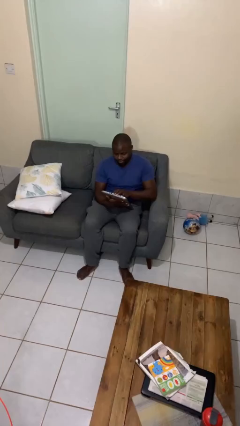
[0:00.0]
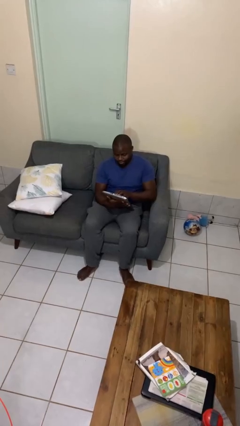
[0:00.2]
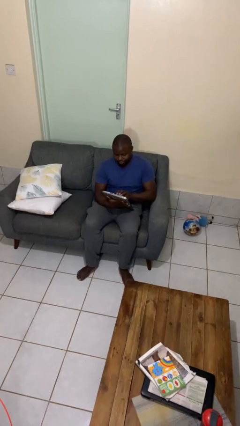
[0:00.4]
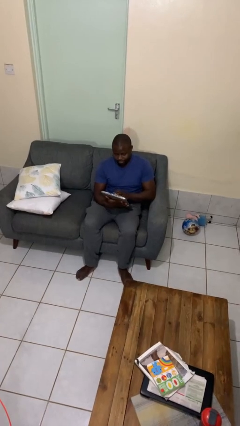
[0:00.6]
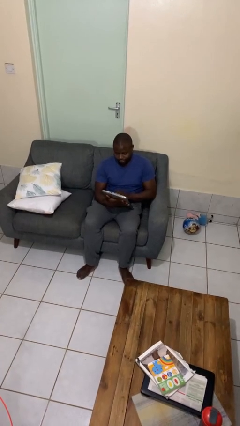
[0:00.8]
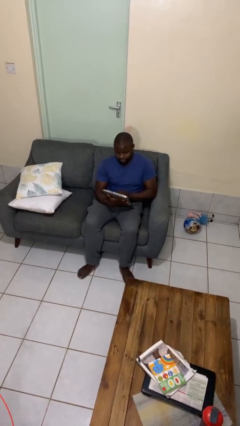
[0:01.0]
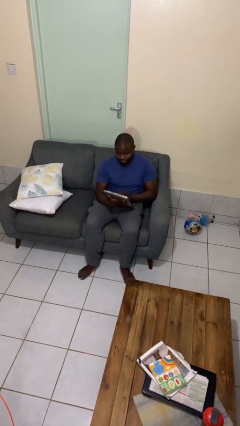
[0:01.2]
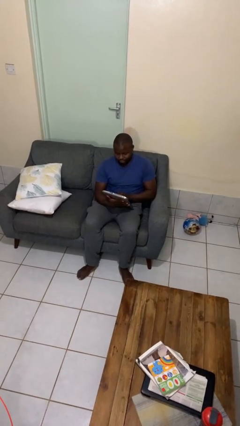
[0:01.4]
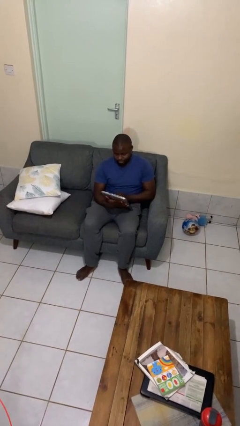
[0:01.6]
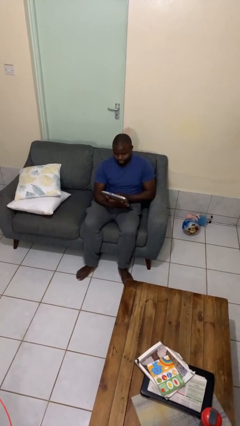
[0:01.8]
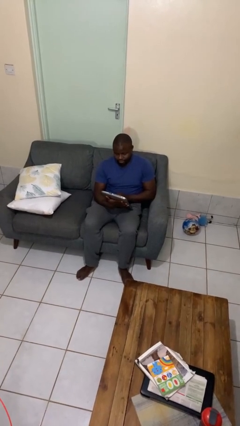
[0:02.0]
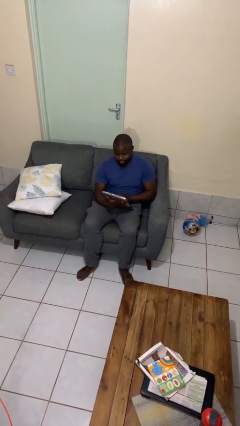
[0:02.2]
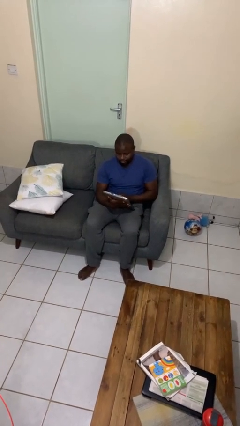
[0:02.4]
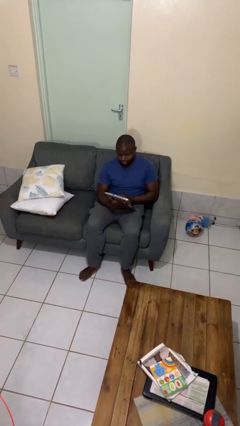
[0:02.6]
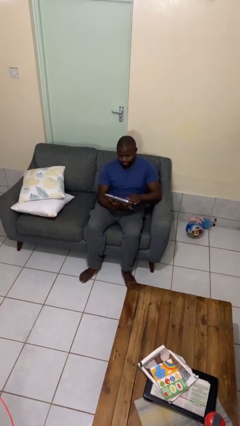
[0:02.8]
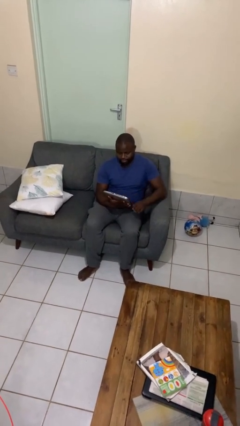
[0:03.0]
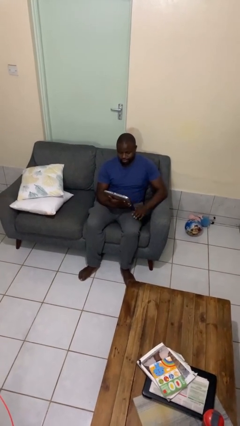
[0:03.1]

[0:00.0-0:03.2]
person interacts with tablet

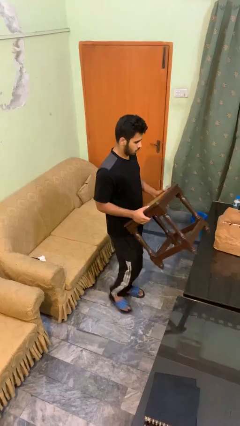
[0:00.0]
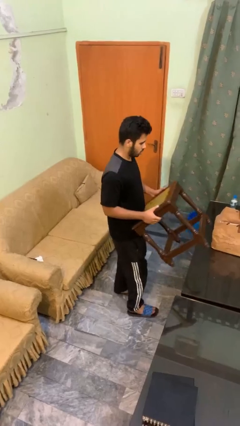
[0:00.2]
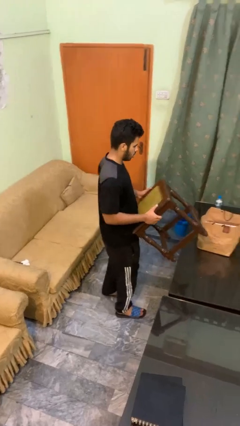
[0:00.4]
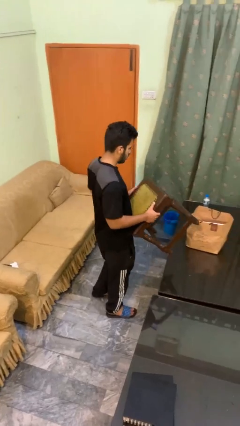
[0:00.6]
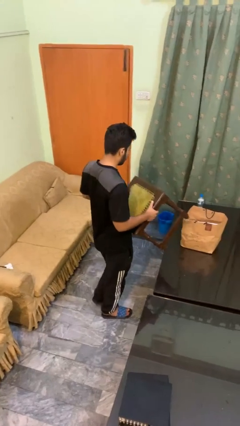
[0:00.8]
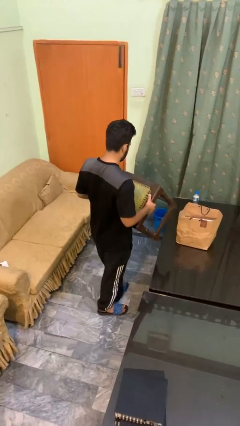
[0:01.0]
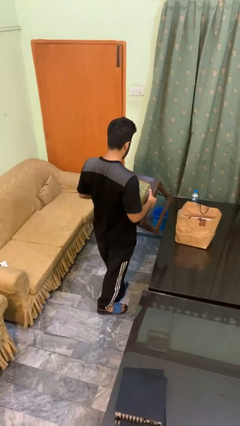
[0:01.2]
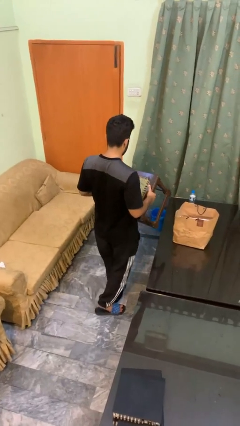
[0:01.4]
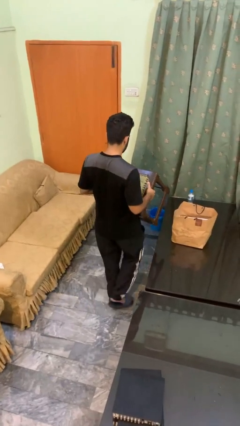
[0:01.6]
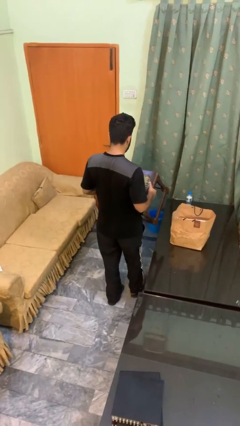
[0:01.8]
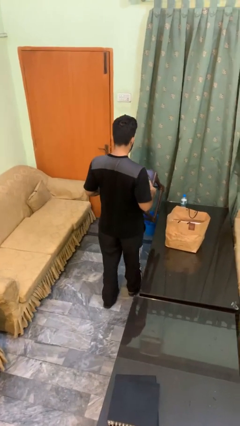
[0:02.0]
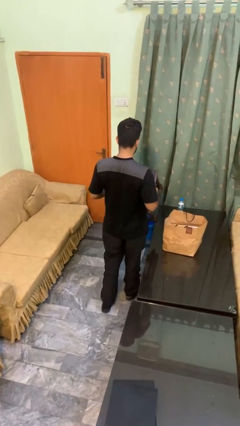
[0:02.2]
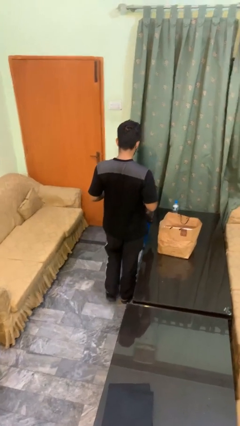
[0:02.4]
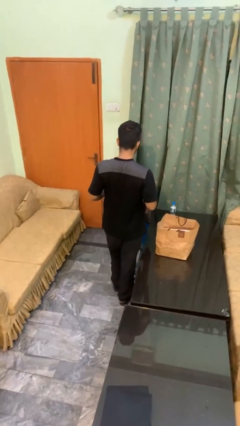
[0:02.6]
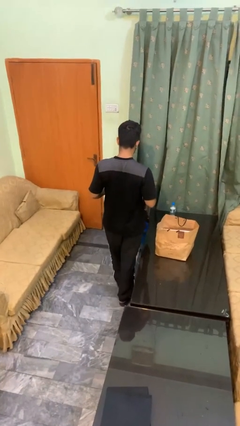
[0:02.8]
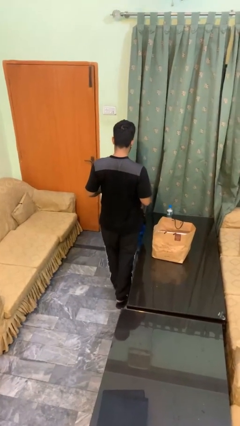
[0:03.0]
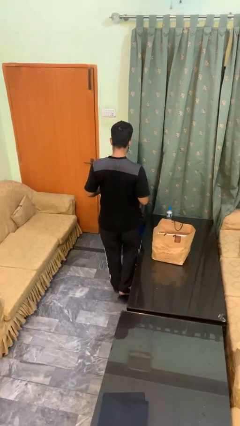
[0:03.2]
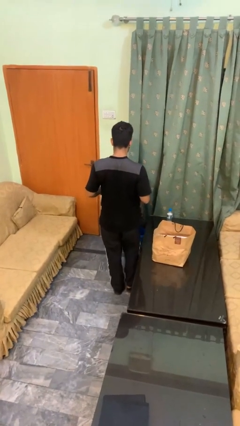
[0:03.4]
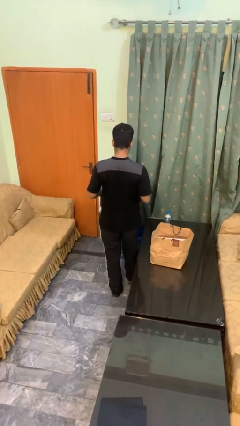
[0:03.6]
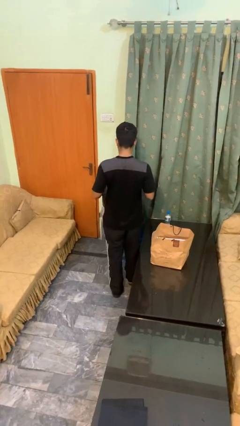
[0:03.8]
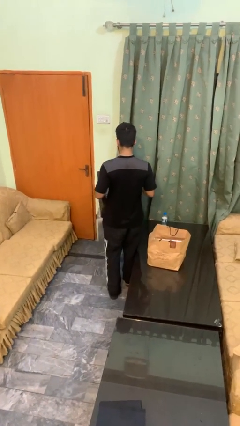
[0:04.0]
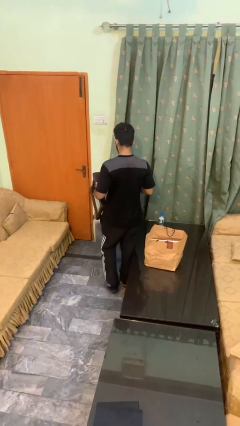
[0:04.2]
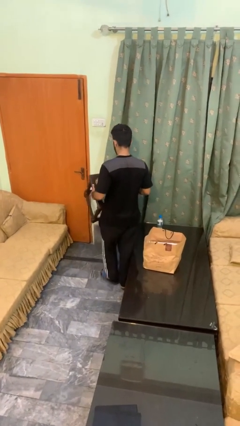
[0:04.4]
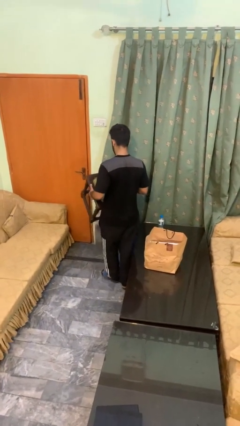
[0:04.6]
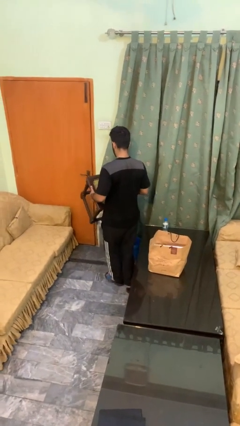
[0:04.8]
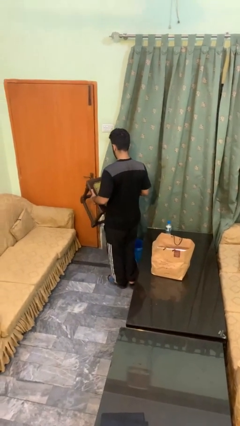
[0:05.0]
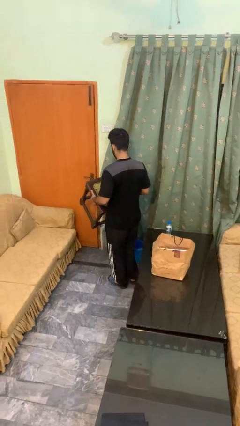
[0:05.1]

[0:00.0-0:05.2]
person carries furniture

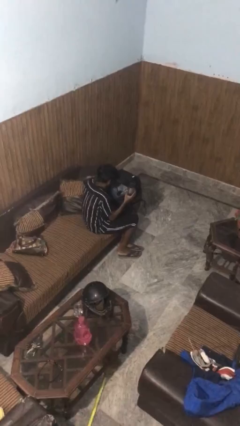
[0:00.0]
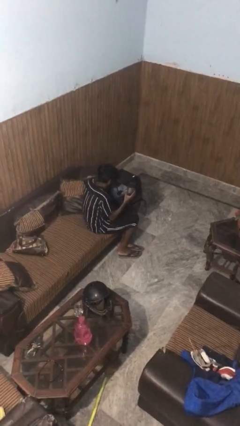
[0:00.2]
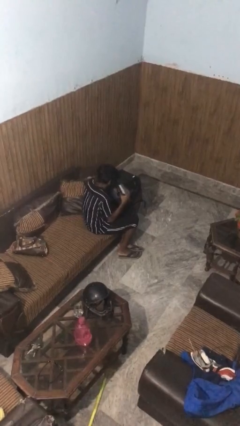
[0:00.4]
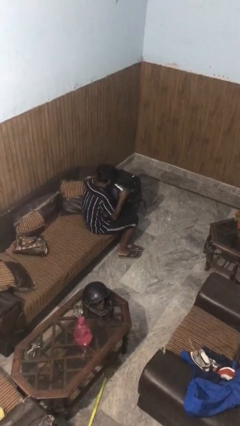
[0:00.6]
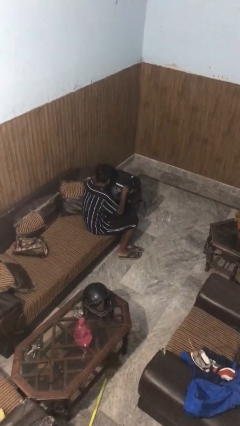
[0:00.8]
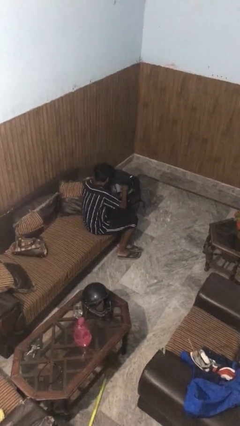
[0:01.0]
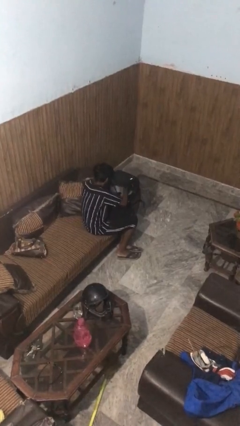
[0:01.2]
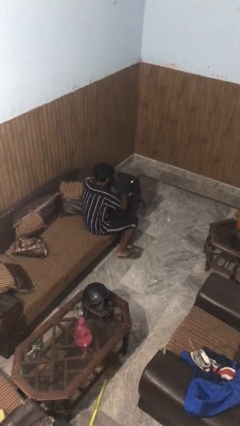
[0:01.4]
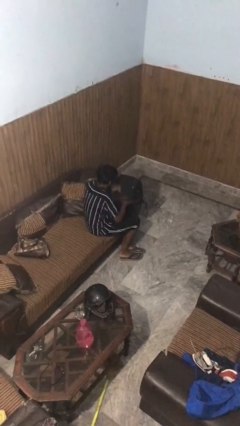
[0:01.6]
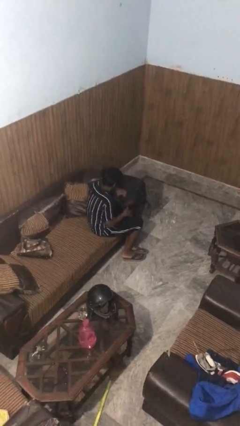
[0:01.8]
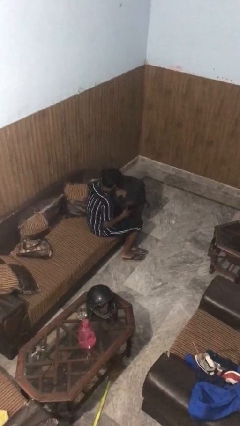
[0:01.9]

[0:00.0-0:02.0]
person puts object into backpack

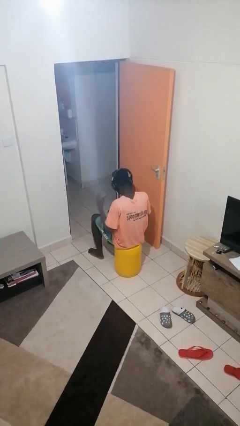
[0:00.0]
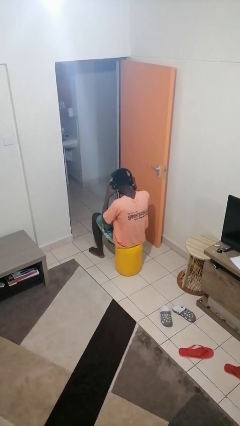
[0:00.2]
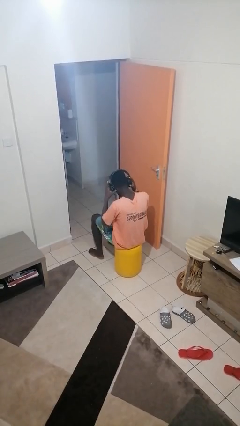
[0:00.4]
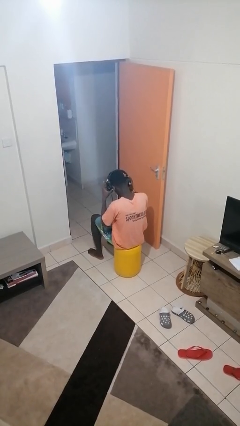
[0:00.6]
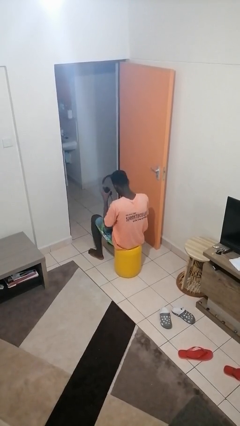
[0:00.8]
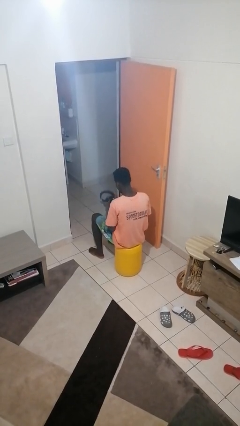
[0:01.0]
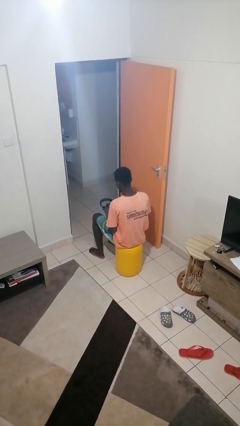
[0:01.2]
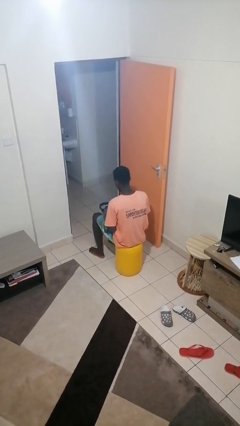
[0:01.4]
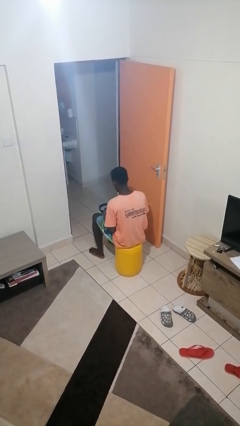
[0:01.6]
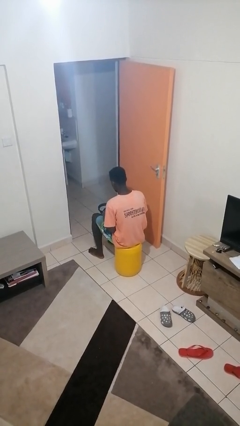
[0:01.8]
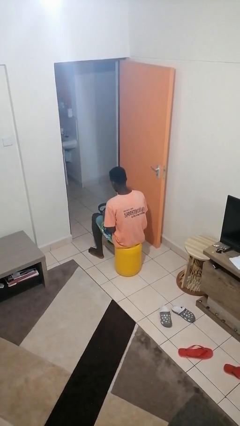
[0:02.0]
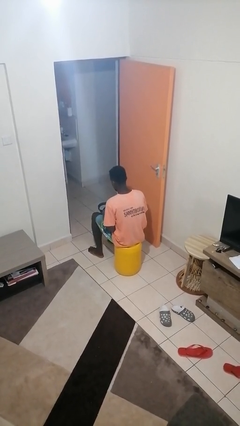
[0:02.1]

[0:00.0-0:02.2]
person takes off headphones

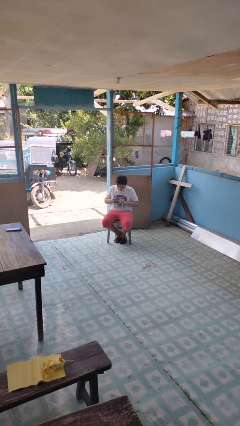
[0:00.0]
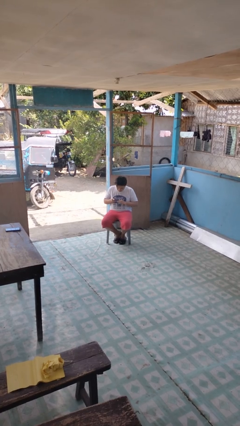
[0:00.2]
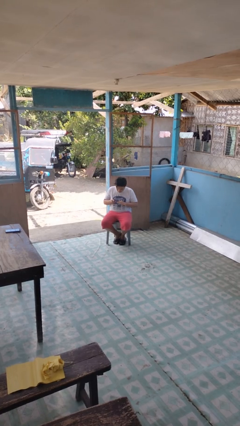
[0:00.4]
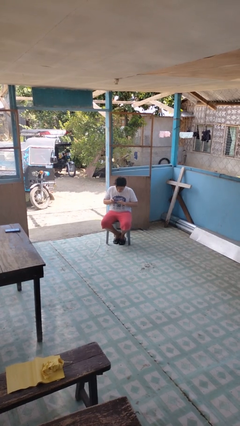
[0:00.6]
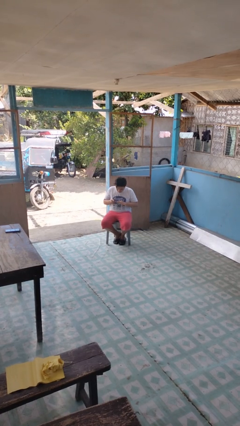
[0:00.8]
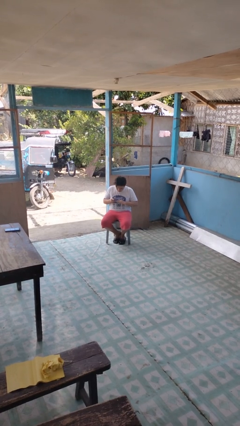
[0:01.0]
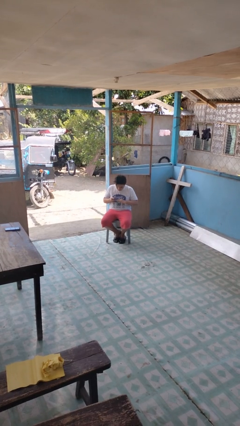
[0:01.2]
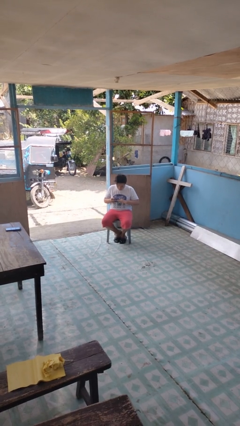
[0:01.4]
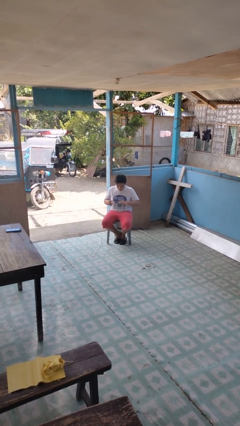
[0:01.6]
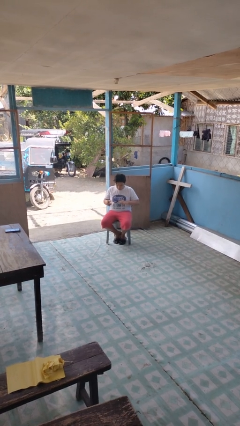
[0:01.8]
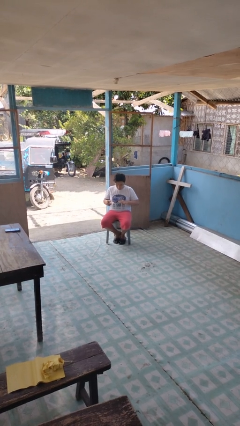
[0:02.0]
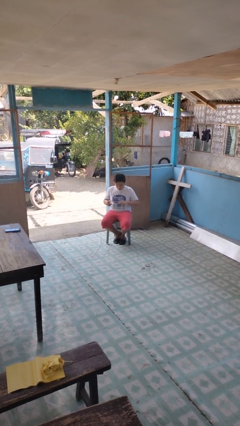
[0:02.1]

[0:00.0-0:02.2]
person clips fingernails

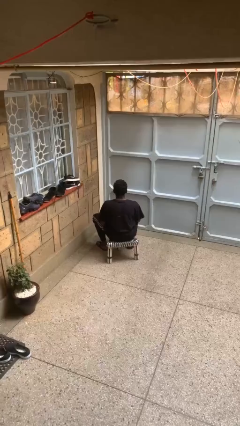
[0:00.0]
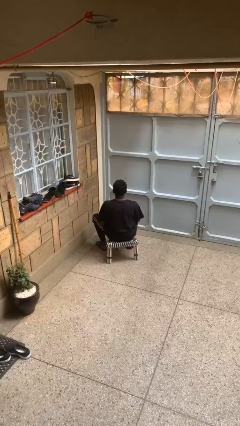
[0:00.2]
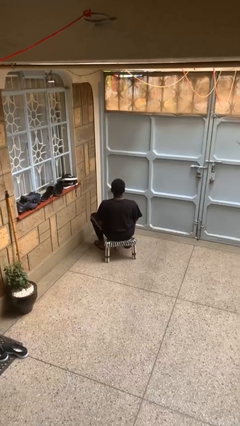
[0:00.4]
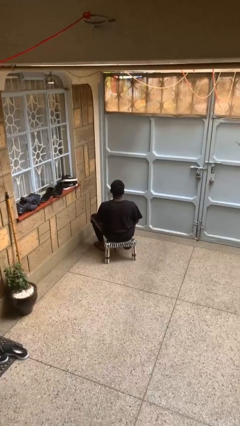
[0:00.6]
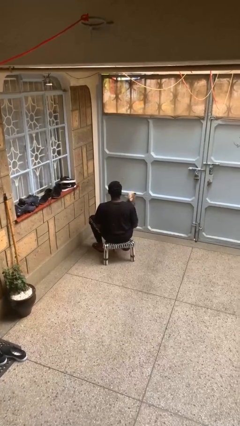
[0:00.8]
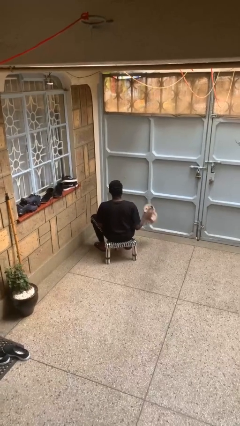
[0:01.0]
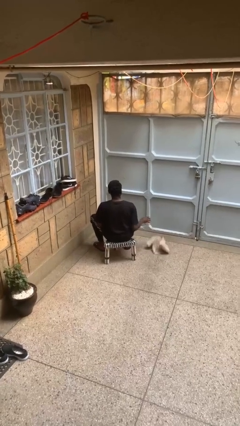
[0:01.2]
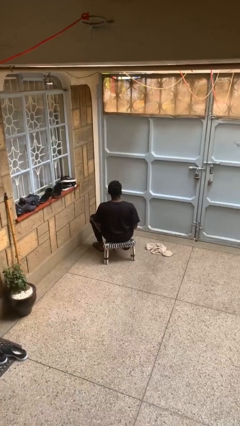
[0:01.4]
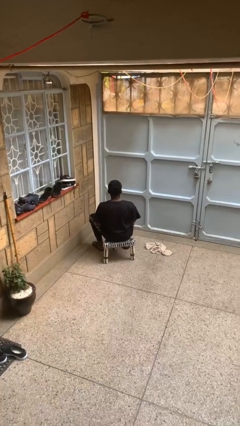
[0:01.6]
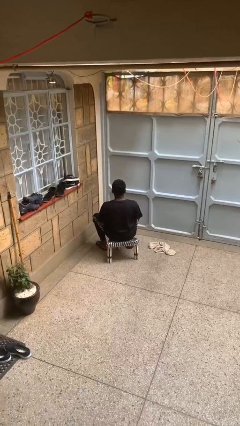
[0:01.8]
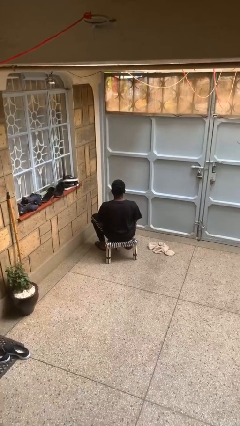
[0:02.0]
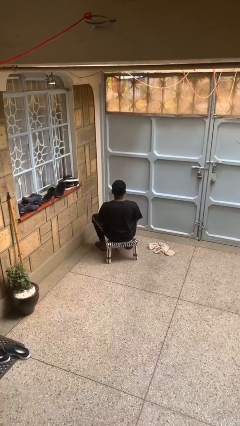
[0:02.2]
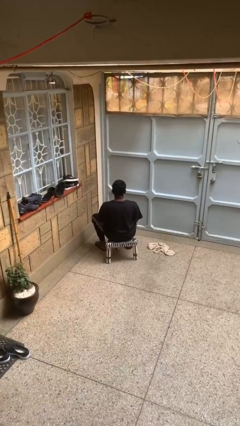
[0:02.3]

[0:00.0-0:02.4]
person throws object to ground

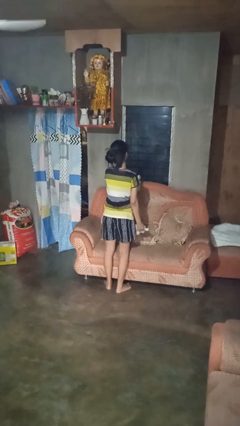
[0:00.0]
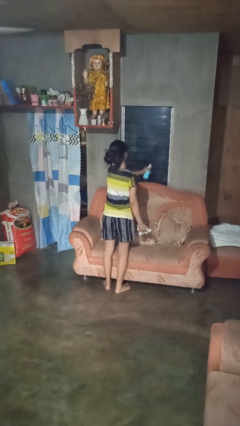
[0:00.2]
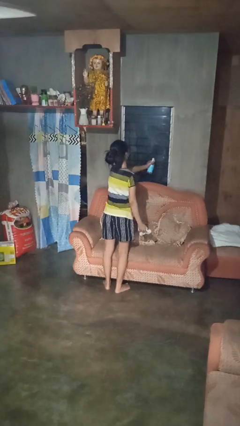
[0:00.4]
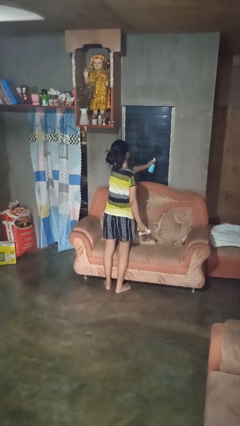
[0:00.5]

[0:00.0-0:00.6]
person sprays from bottle
